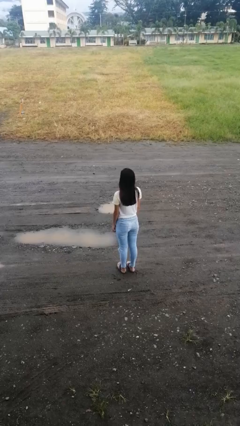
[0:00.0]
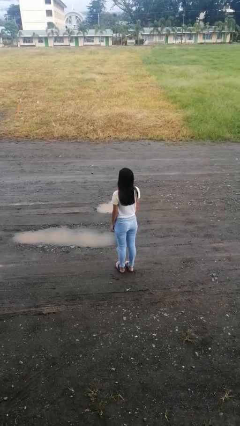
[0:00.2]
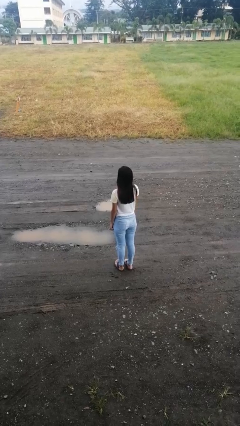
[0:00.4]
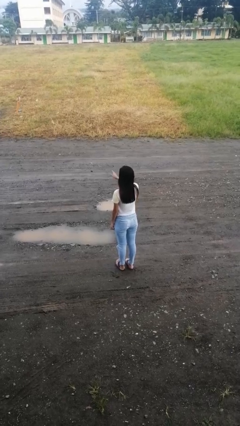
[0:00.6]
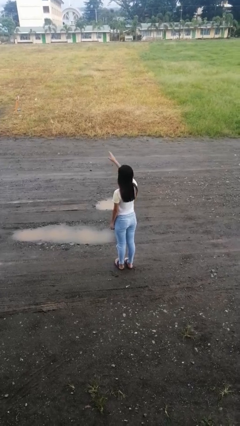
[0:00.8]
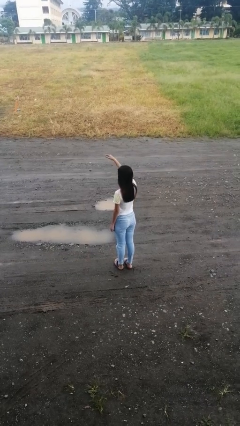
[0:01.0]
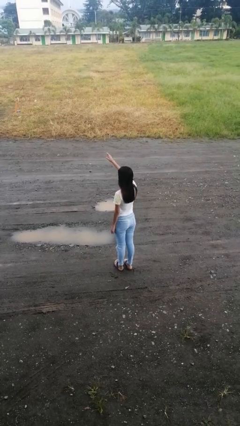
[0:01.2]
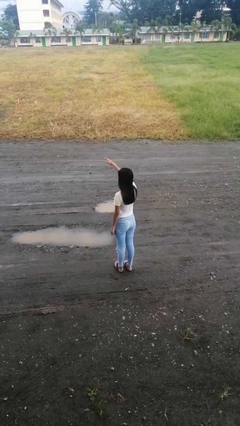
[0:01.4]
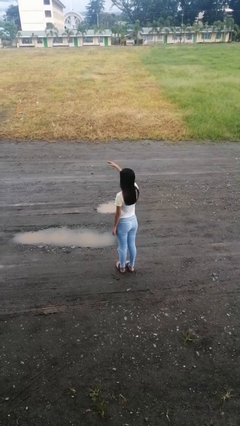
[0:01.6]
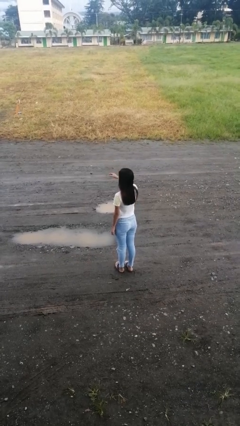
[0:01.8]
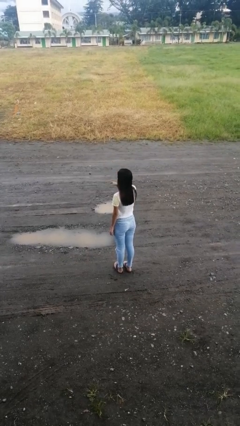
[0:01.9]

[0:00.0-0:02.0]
person gestures come here

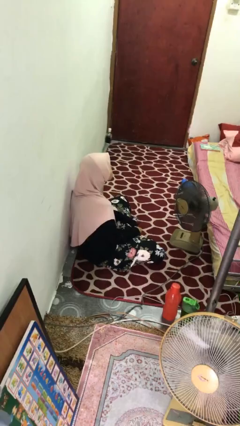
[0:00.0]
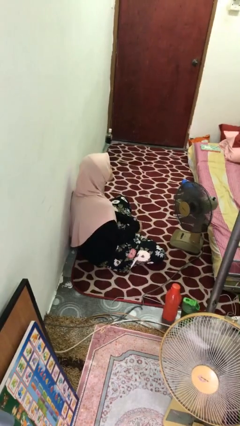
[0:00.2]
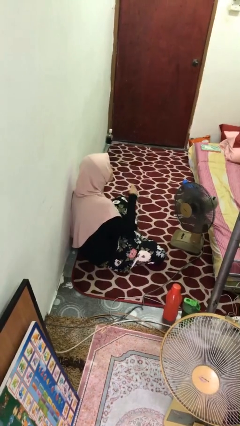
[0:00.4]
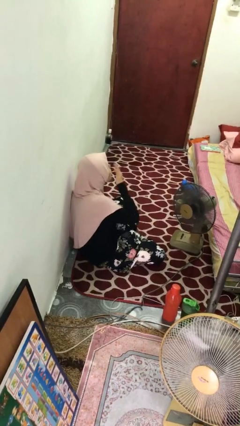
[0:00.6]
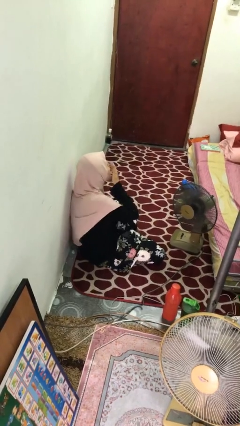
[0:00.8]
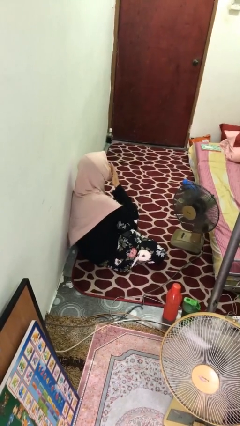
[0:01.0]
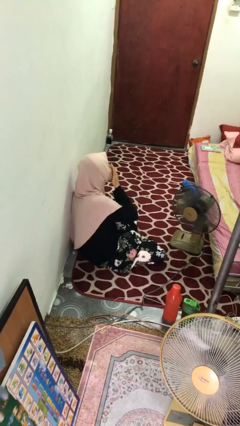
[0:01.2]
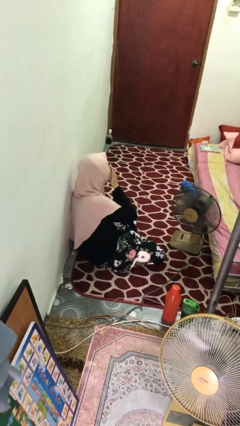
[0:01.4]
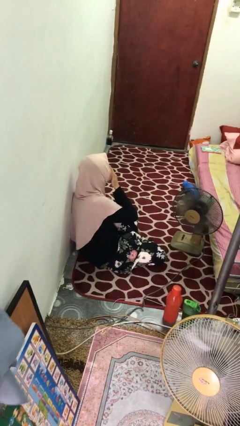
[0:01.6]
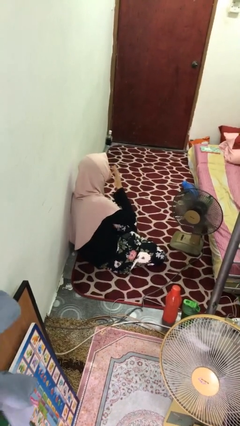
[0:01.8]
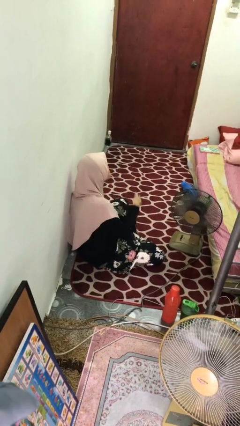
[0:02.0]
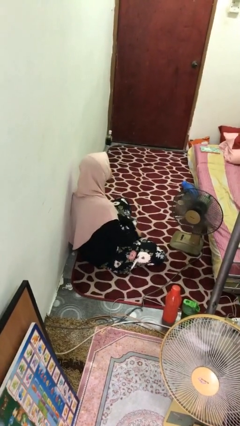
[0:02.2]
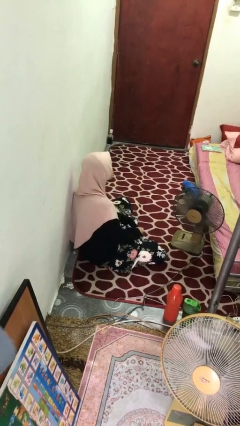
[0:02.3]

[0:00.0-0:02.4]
person yawns

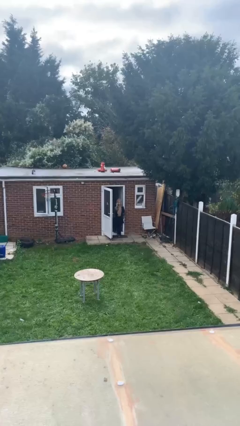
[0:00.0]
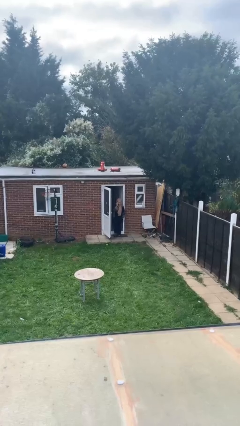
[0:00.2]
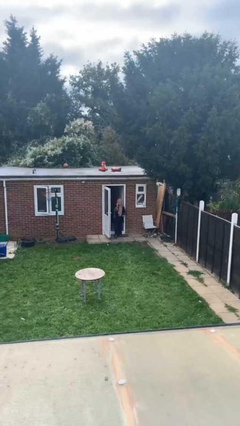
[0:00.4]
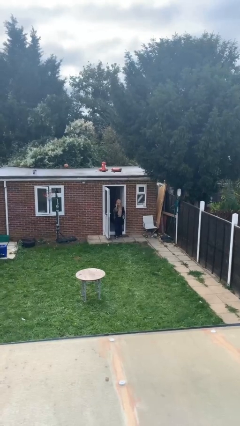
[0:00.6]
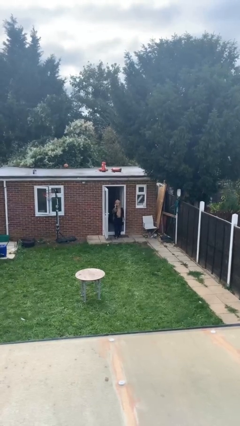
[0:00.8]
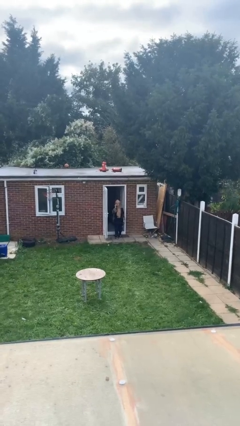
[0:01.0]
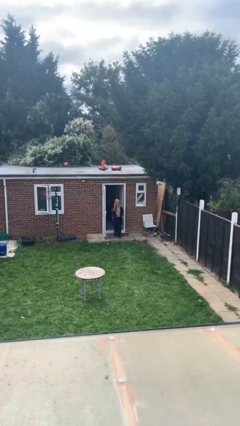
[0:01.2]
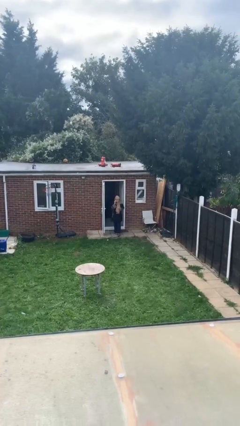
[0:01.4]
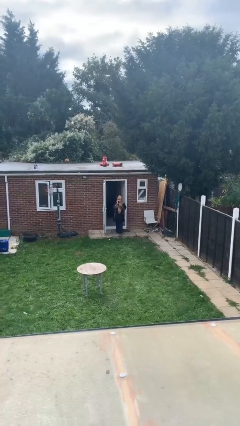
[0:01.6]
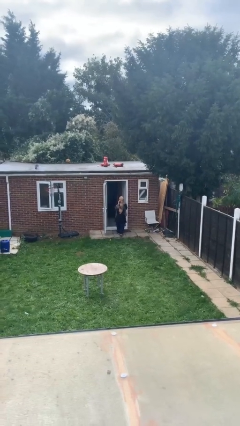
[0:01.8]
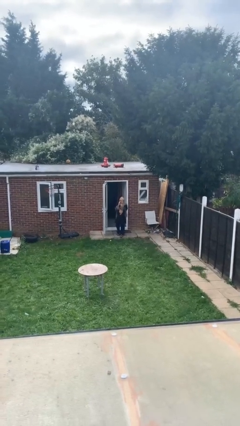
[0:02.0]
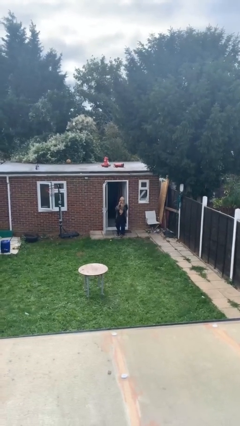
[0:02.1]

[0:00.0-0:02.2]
person enters scene through structure

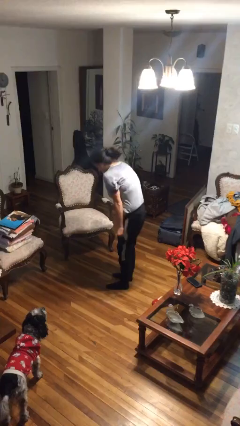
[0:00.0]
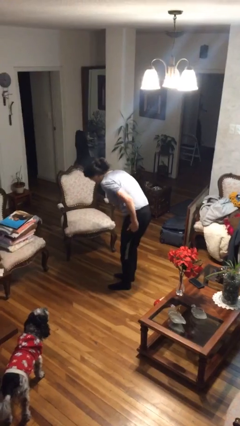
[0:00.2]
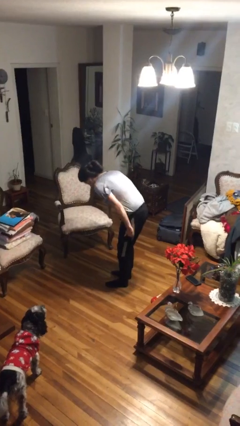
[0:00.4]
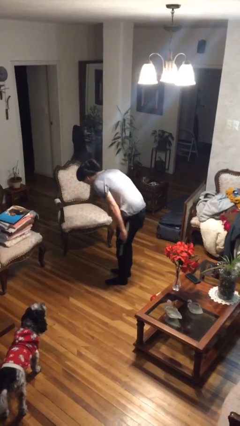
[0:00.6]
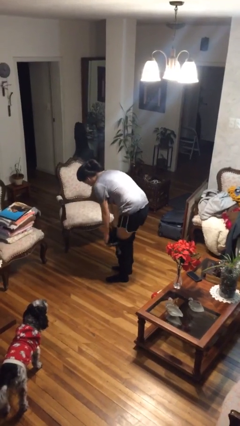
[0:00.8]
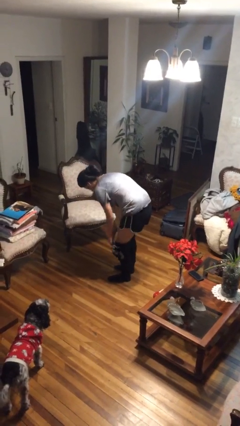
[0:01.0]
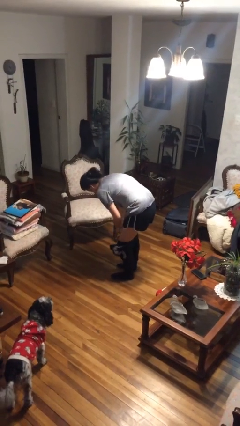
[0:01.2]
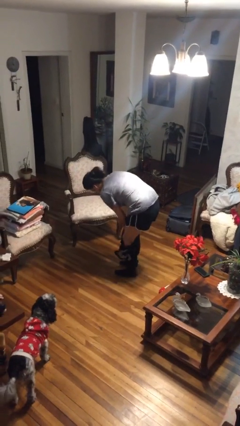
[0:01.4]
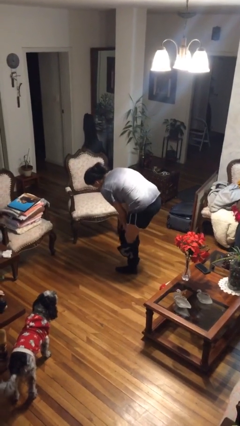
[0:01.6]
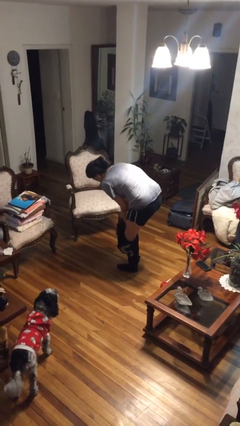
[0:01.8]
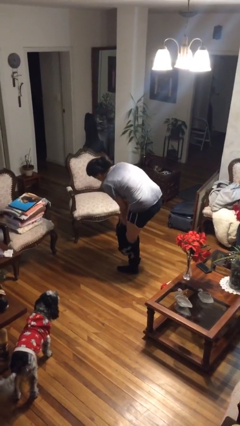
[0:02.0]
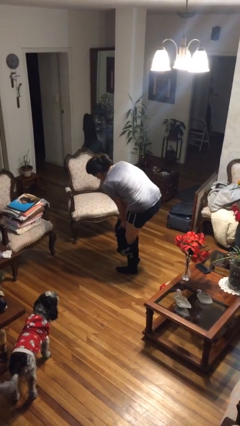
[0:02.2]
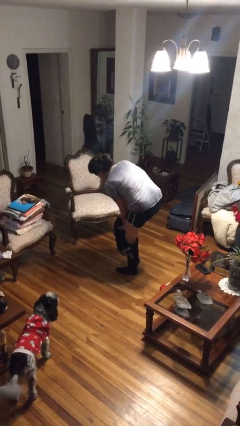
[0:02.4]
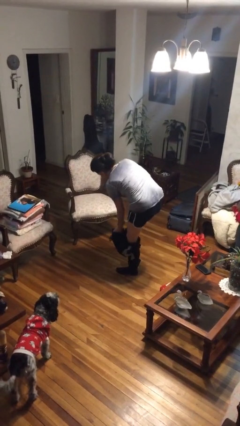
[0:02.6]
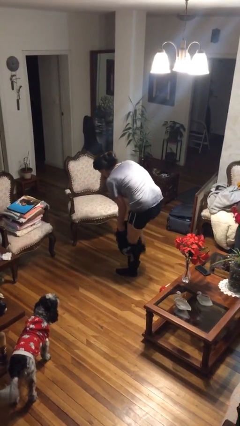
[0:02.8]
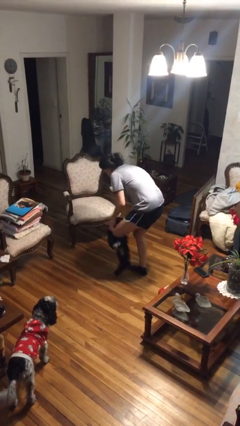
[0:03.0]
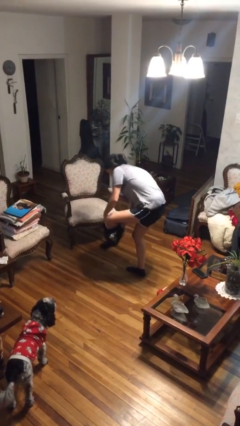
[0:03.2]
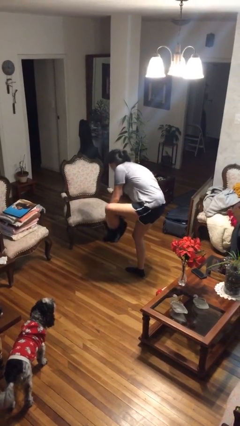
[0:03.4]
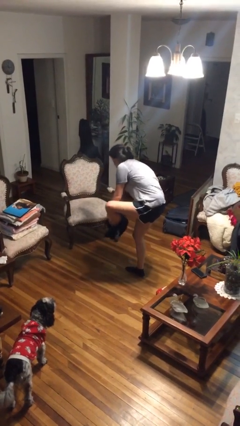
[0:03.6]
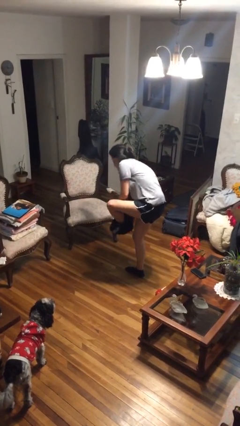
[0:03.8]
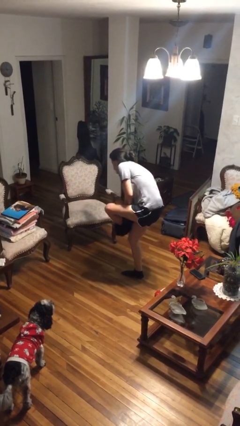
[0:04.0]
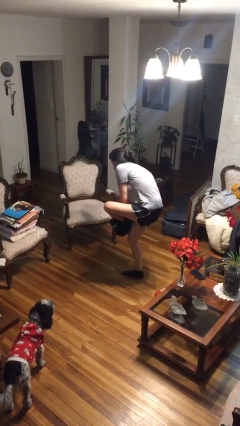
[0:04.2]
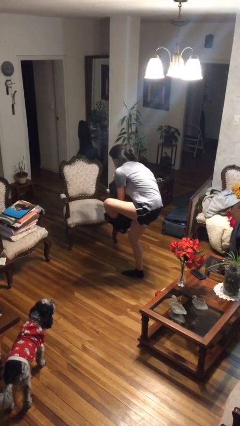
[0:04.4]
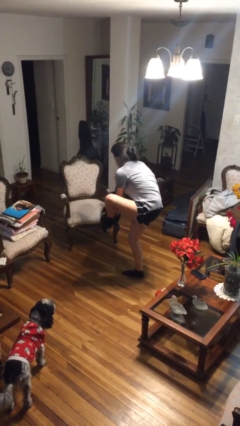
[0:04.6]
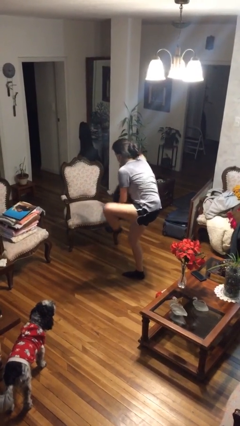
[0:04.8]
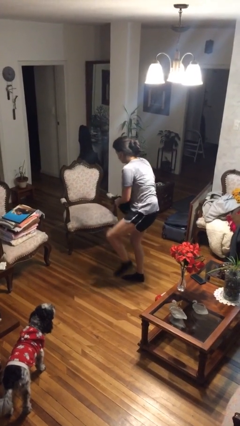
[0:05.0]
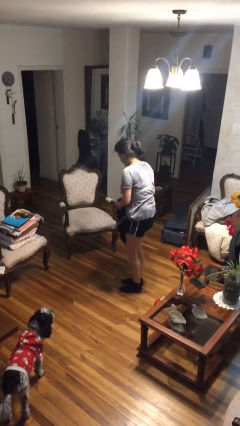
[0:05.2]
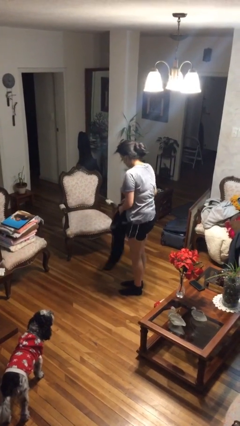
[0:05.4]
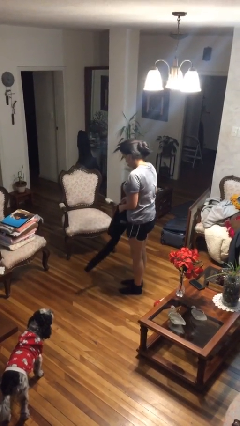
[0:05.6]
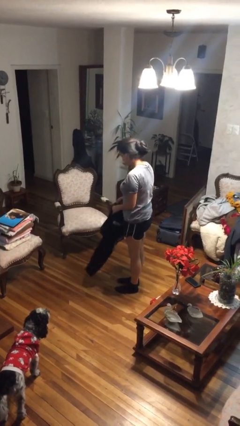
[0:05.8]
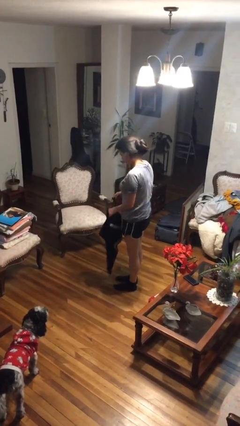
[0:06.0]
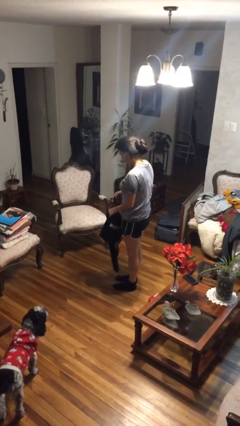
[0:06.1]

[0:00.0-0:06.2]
person takes off pants

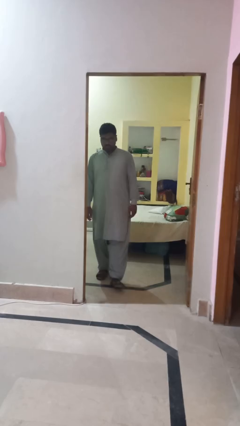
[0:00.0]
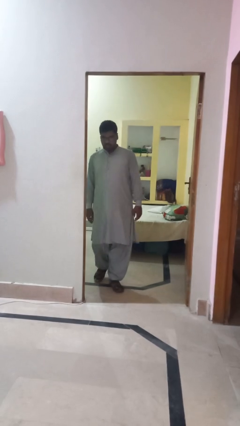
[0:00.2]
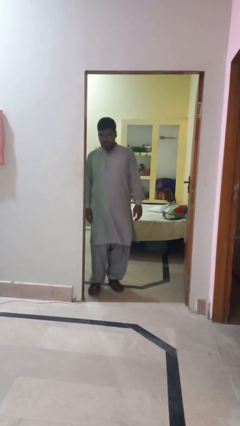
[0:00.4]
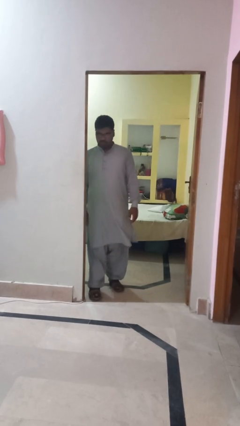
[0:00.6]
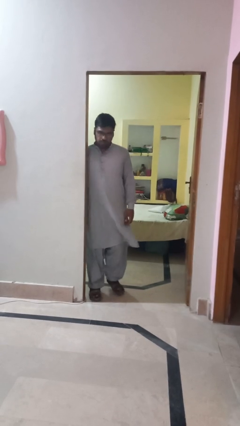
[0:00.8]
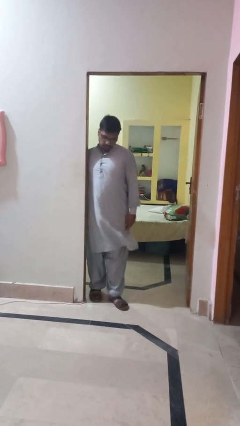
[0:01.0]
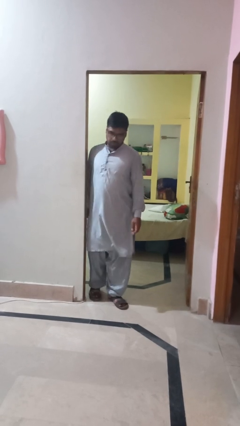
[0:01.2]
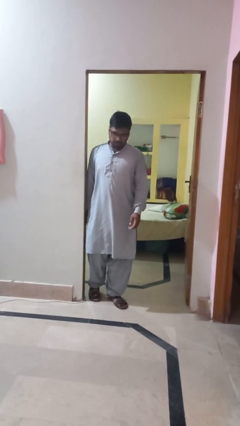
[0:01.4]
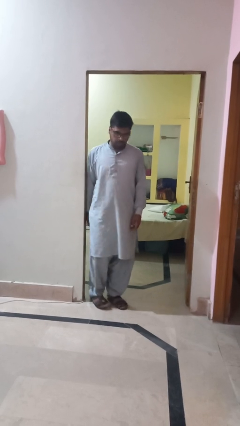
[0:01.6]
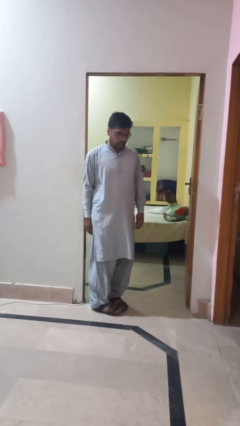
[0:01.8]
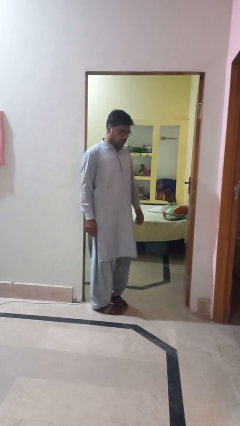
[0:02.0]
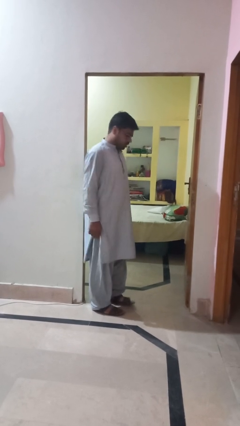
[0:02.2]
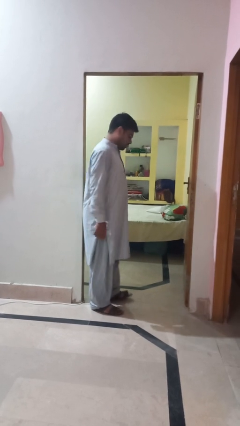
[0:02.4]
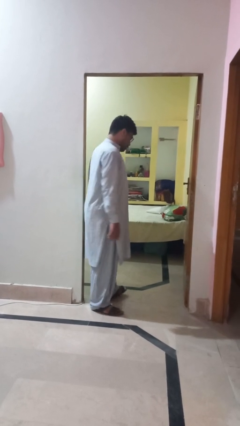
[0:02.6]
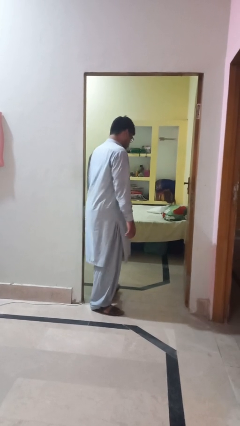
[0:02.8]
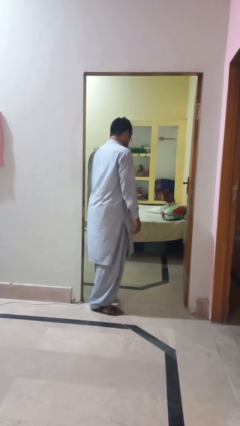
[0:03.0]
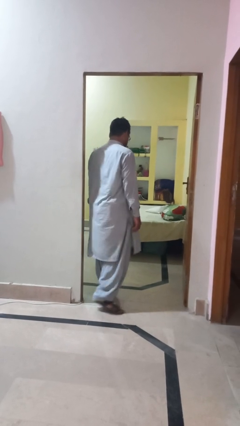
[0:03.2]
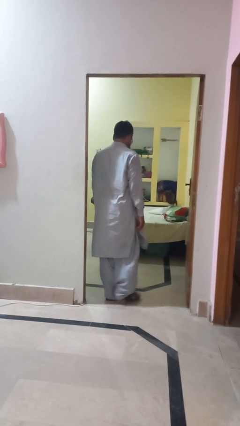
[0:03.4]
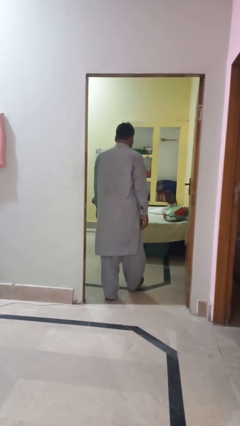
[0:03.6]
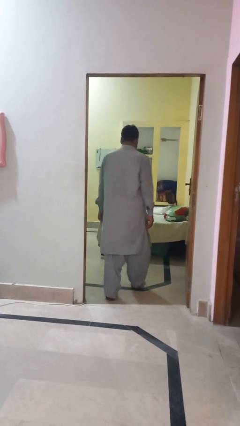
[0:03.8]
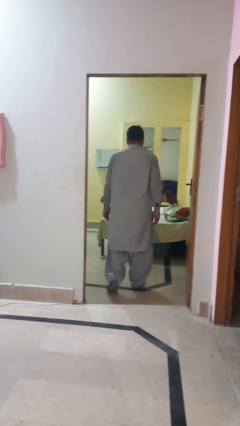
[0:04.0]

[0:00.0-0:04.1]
person bumps into wall

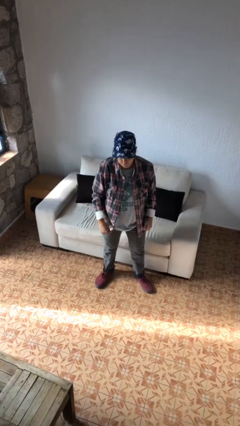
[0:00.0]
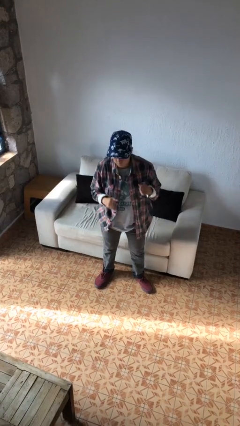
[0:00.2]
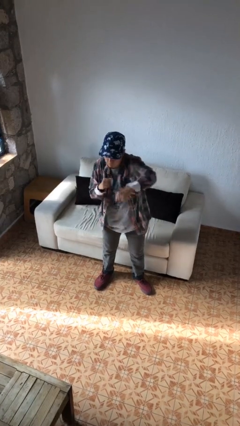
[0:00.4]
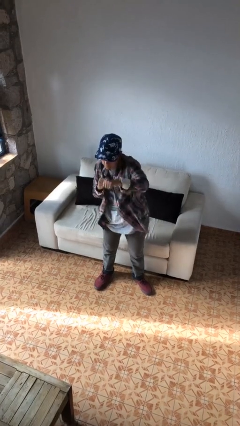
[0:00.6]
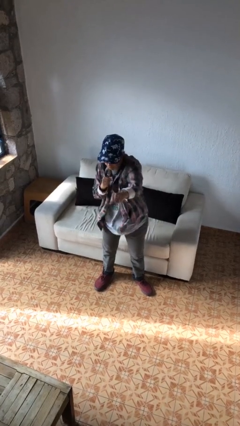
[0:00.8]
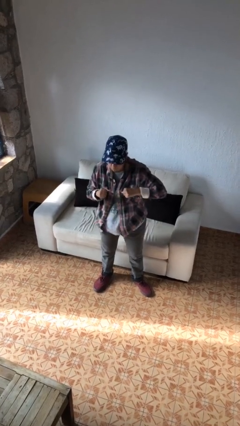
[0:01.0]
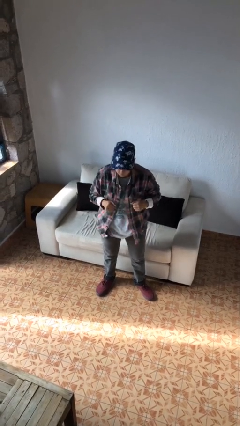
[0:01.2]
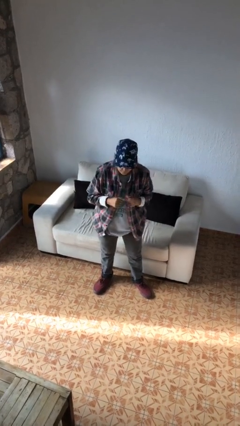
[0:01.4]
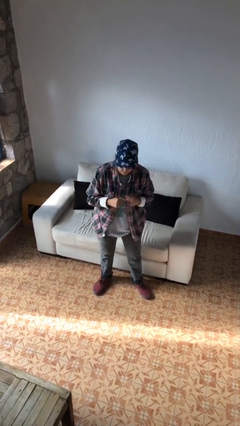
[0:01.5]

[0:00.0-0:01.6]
person punches
